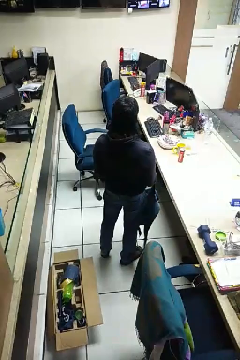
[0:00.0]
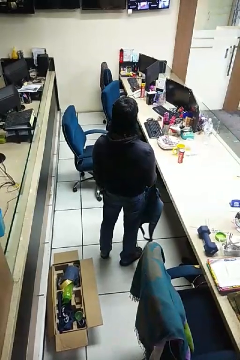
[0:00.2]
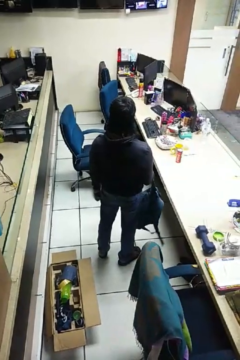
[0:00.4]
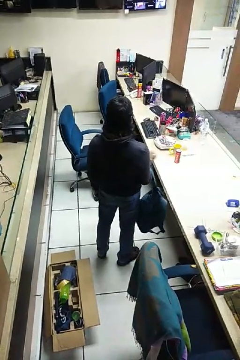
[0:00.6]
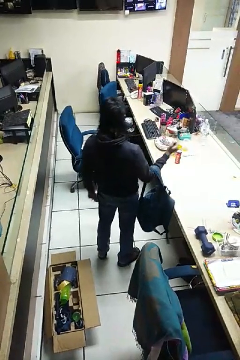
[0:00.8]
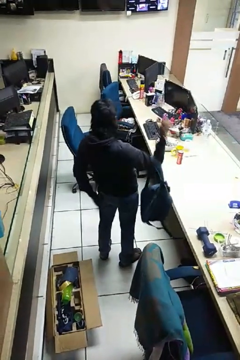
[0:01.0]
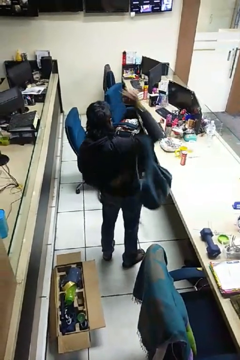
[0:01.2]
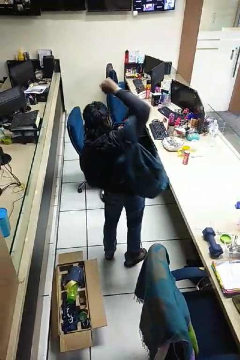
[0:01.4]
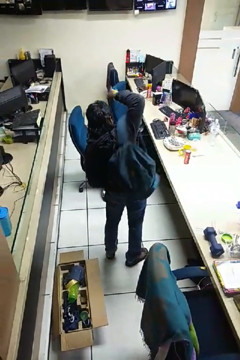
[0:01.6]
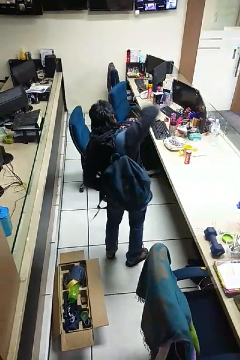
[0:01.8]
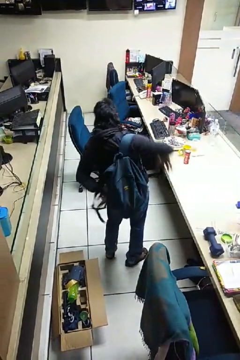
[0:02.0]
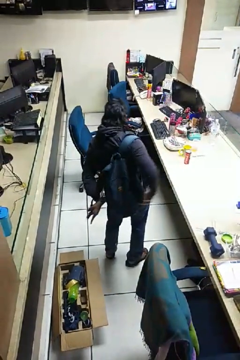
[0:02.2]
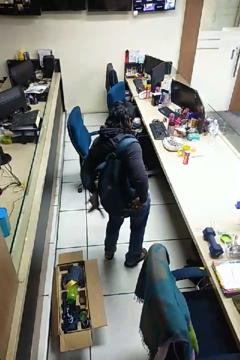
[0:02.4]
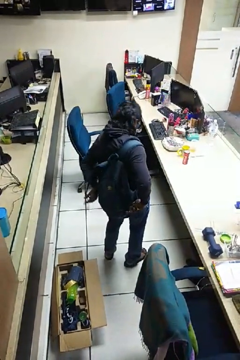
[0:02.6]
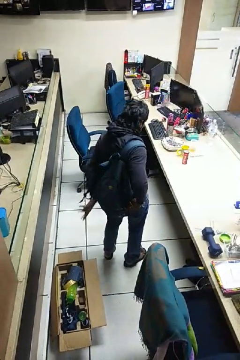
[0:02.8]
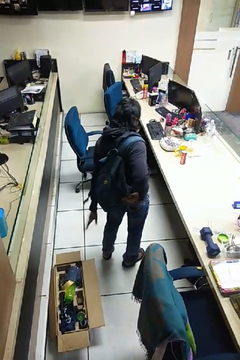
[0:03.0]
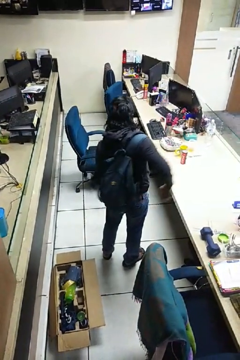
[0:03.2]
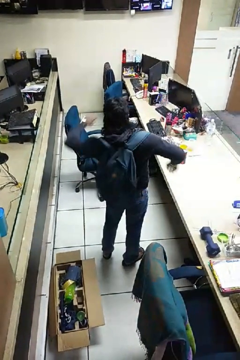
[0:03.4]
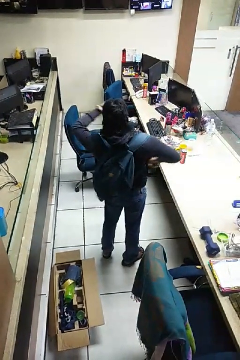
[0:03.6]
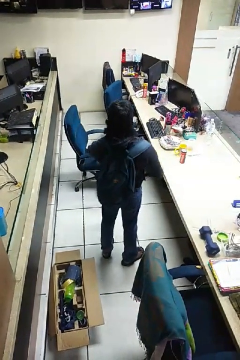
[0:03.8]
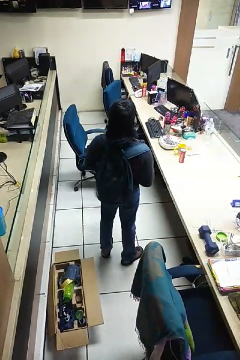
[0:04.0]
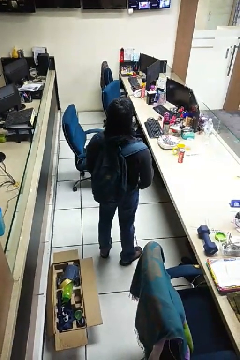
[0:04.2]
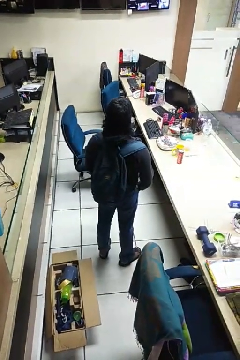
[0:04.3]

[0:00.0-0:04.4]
person puts on backpack

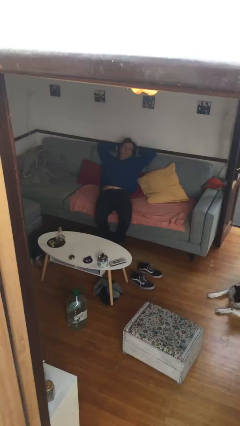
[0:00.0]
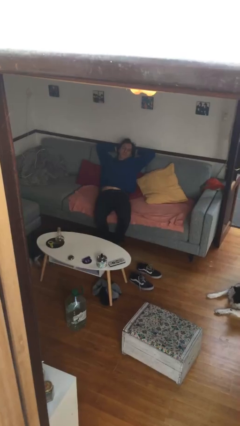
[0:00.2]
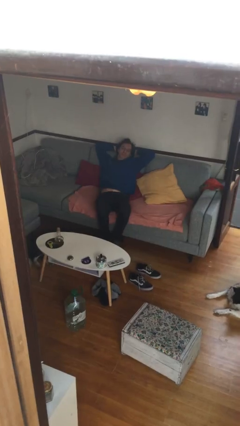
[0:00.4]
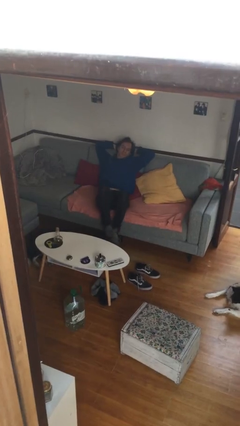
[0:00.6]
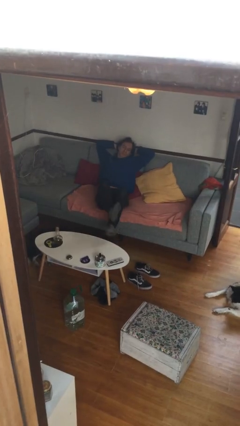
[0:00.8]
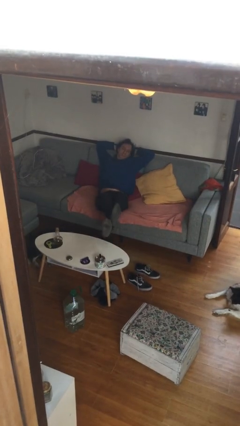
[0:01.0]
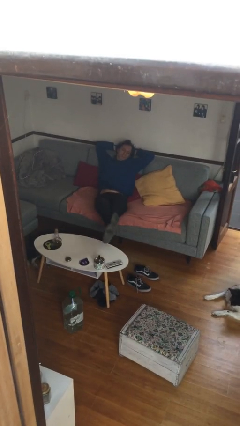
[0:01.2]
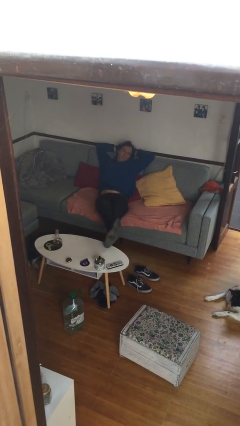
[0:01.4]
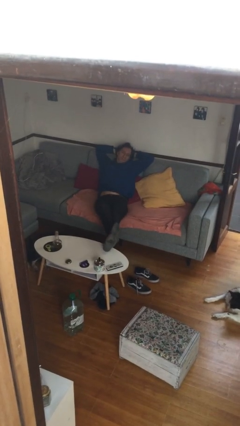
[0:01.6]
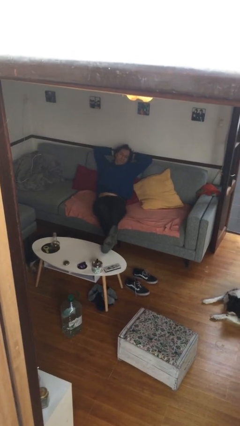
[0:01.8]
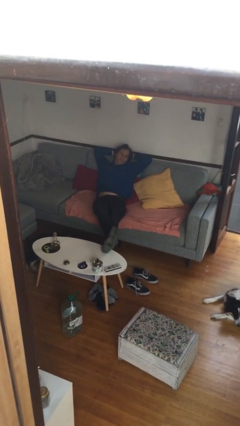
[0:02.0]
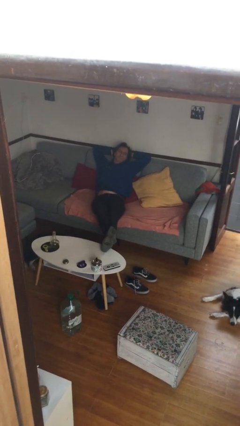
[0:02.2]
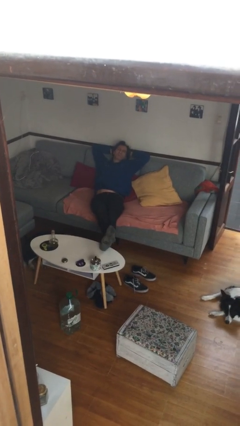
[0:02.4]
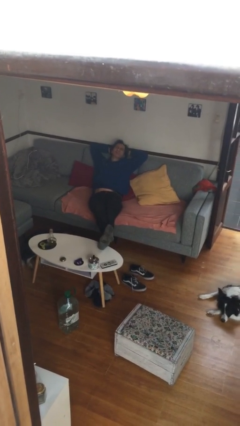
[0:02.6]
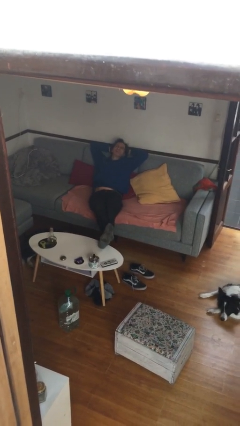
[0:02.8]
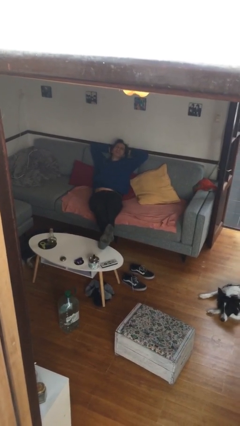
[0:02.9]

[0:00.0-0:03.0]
person puts feet up

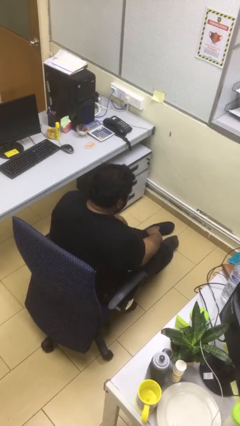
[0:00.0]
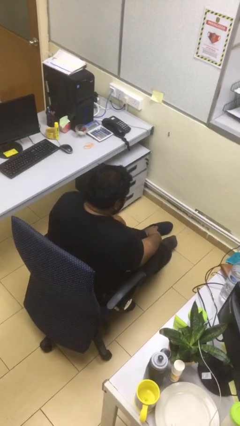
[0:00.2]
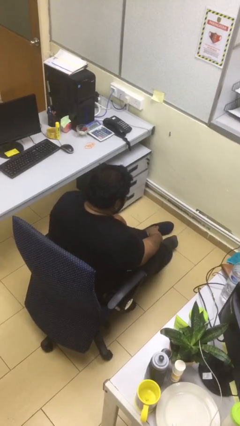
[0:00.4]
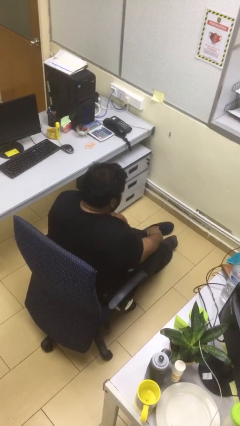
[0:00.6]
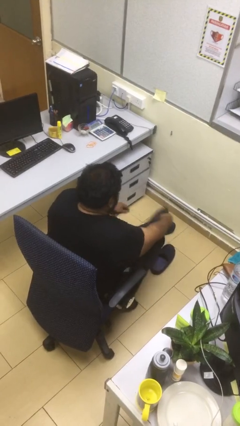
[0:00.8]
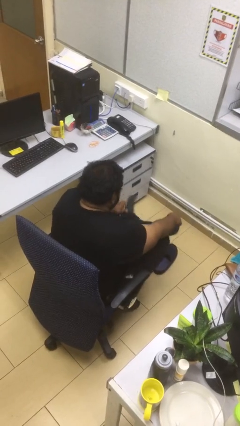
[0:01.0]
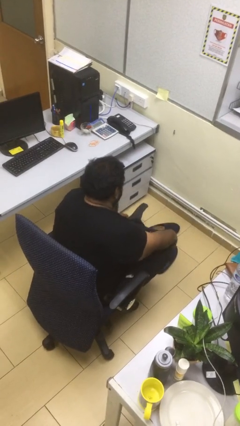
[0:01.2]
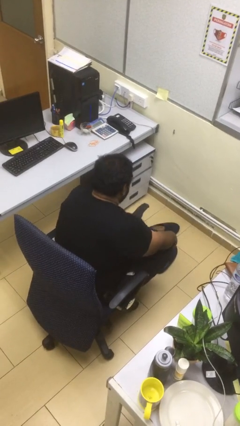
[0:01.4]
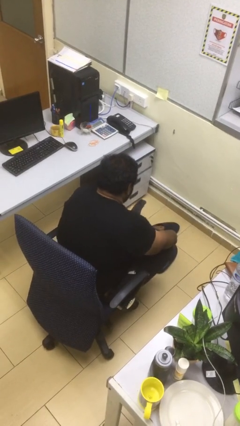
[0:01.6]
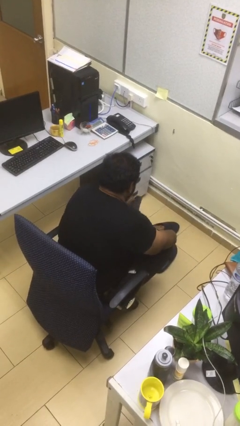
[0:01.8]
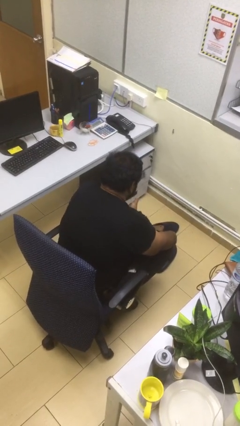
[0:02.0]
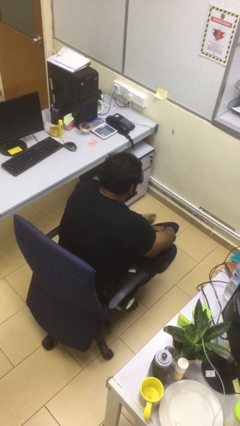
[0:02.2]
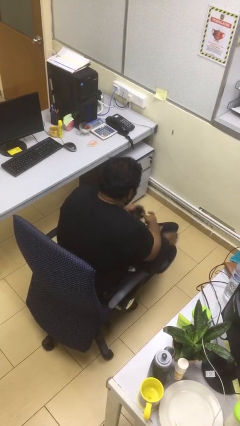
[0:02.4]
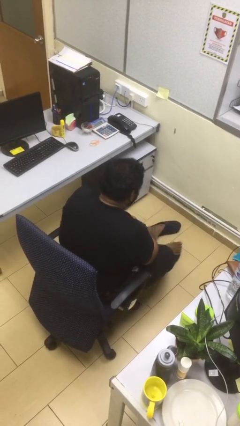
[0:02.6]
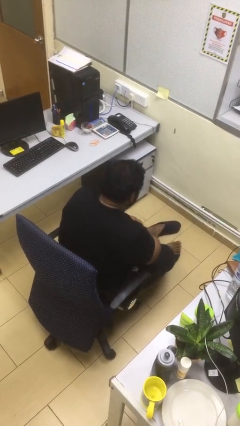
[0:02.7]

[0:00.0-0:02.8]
person takes off socks

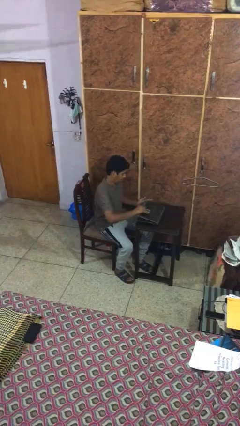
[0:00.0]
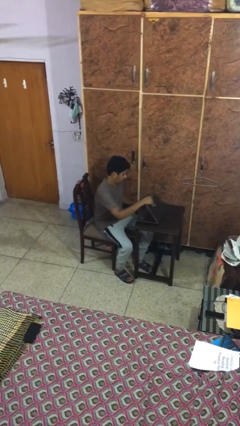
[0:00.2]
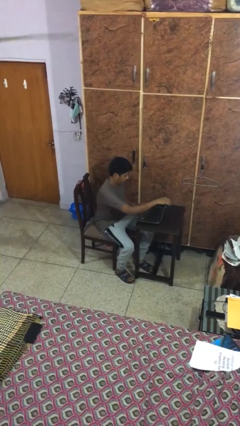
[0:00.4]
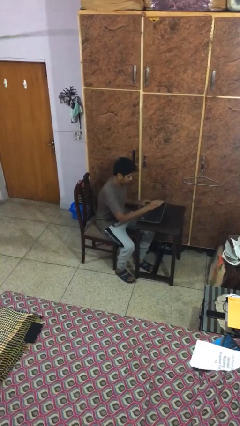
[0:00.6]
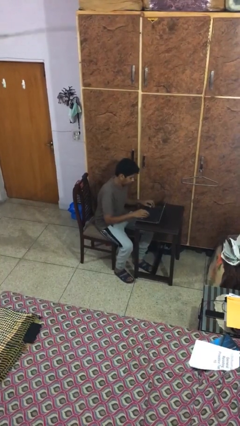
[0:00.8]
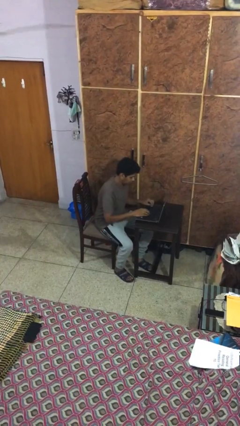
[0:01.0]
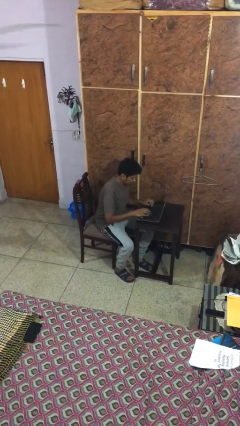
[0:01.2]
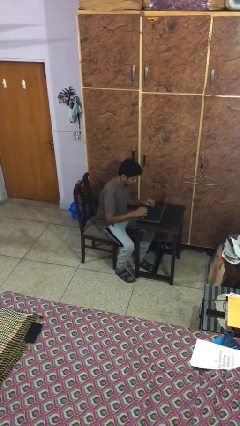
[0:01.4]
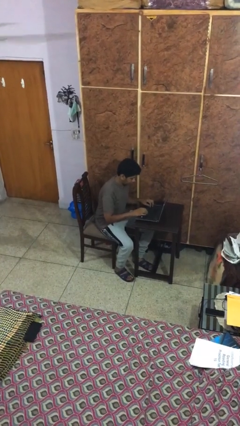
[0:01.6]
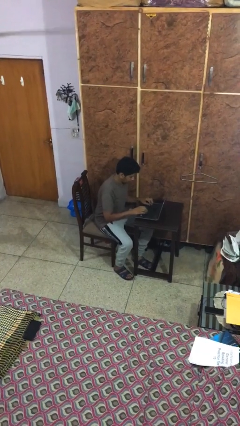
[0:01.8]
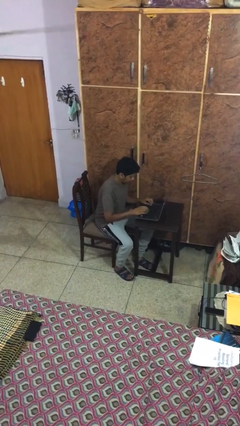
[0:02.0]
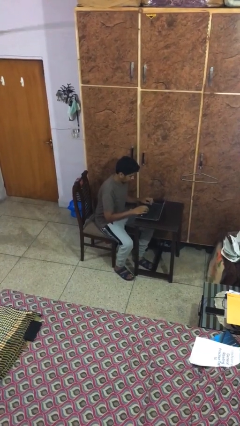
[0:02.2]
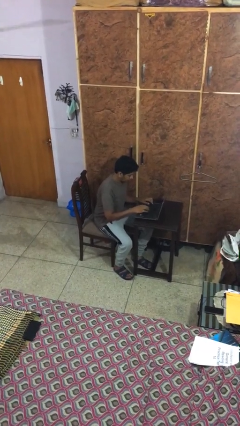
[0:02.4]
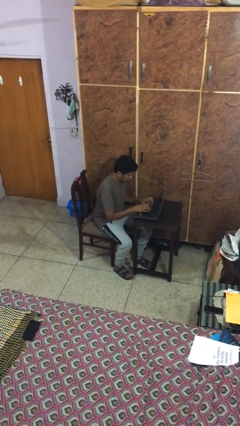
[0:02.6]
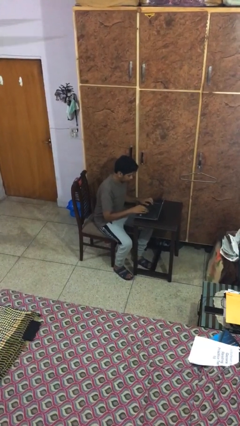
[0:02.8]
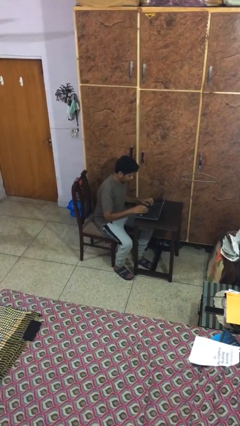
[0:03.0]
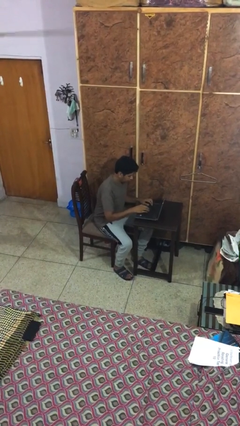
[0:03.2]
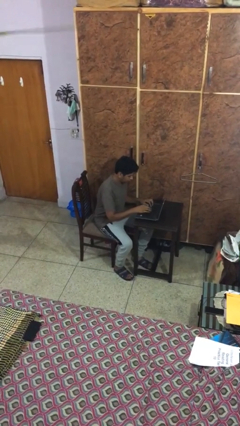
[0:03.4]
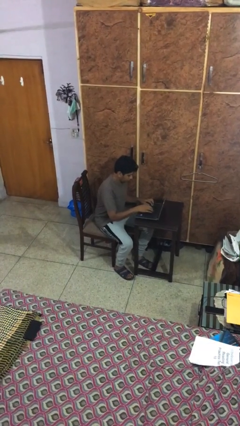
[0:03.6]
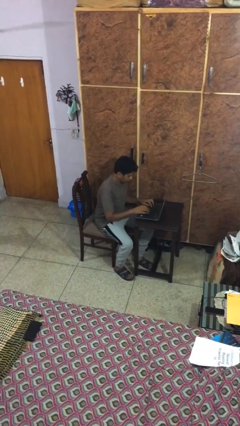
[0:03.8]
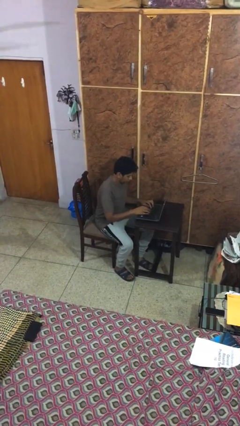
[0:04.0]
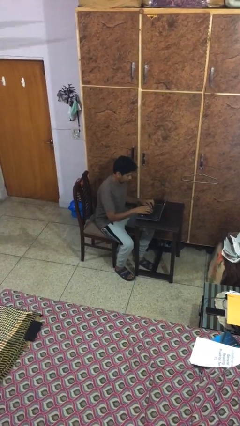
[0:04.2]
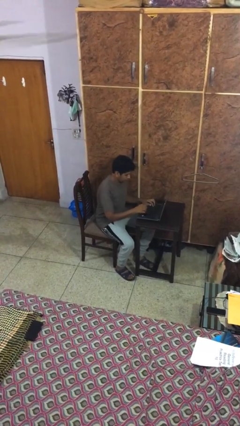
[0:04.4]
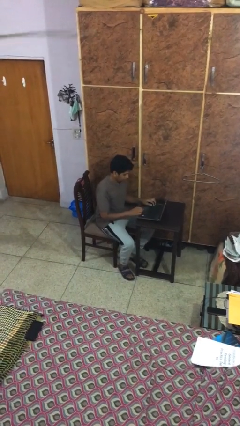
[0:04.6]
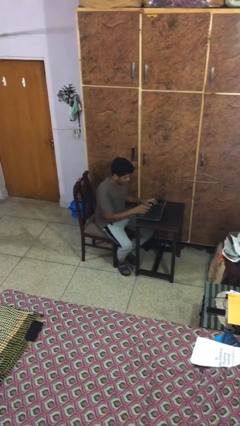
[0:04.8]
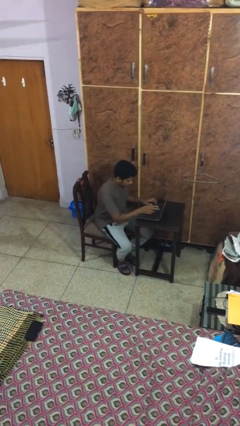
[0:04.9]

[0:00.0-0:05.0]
person interacts with laptop

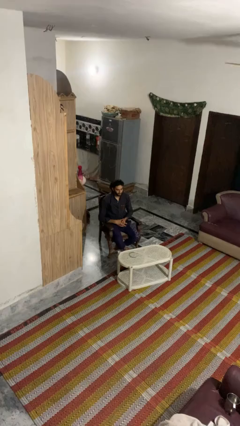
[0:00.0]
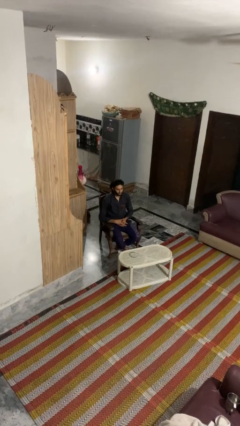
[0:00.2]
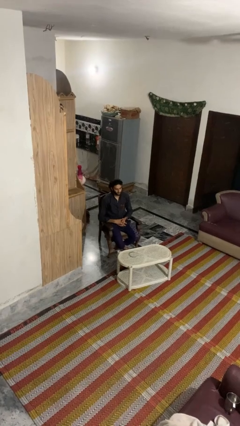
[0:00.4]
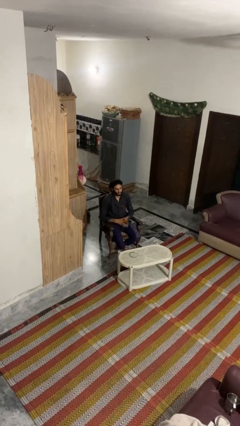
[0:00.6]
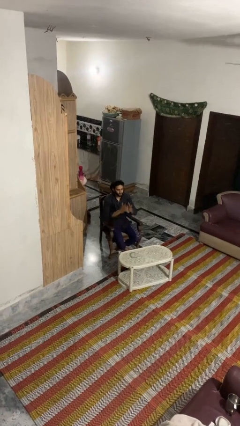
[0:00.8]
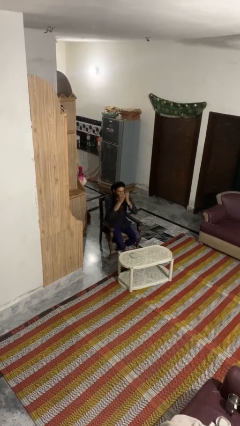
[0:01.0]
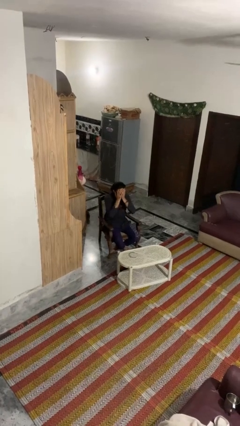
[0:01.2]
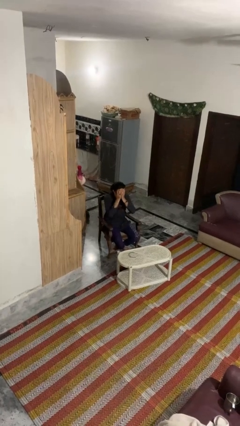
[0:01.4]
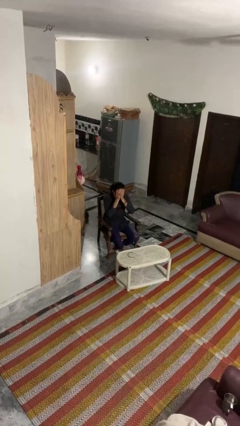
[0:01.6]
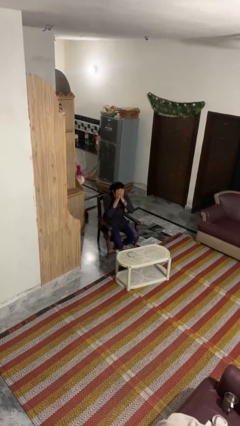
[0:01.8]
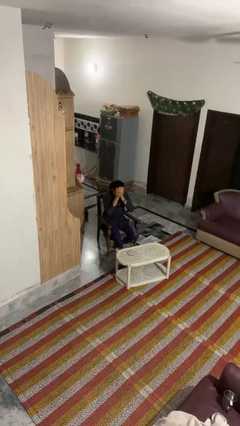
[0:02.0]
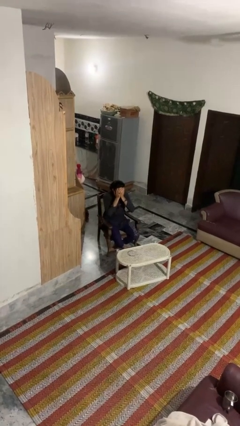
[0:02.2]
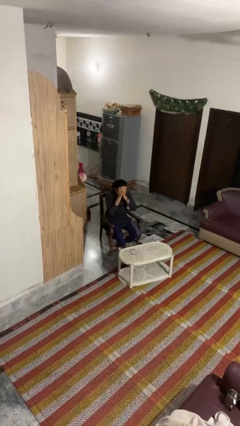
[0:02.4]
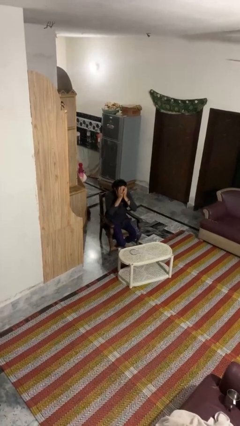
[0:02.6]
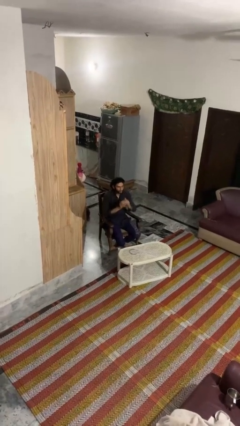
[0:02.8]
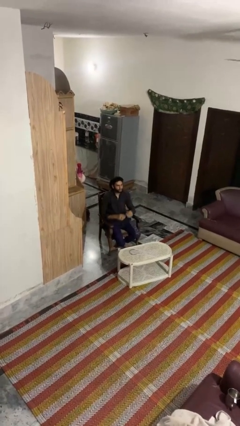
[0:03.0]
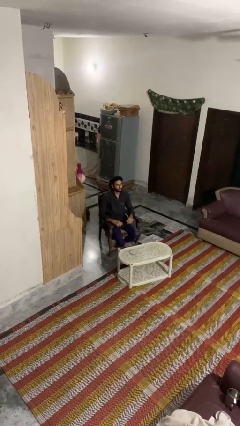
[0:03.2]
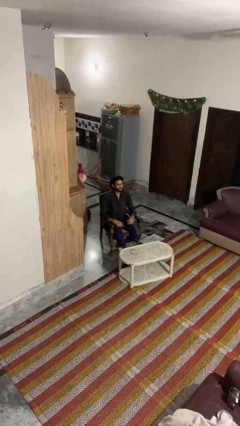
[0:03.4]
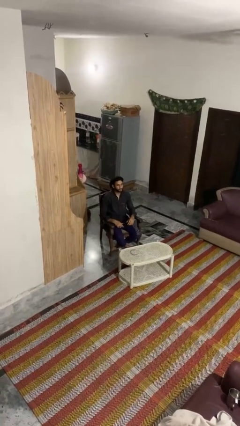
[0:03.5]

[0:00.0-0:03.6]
person covers face with hands
